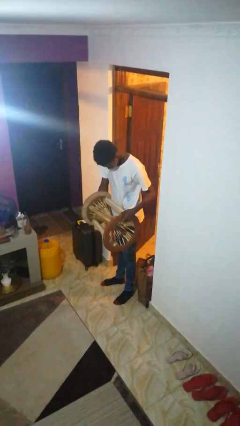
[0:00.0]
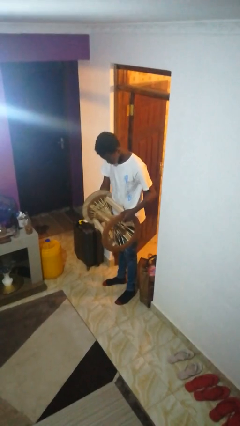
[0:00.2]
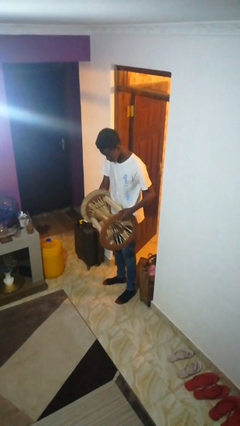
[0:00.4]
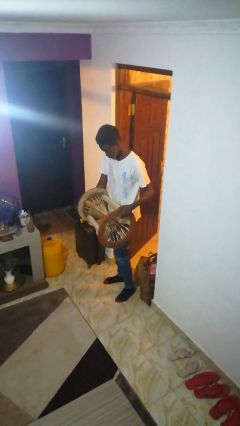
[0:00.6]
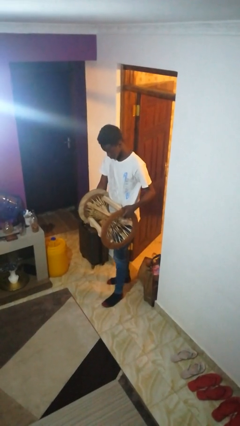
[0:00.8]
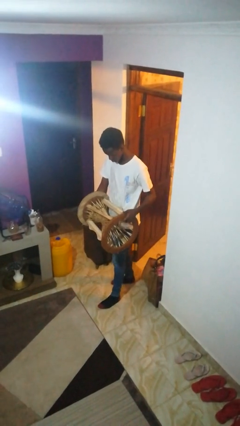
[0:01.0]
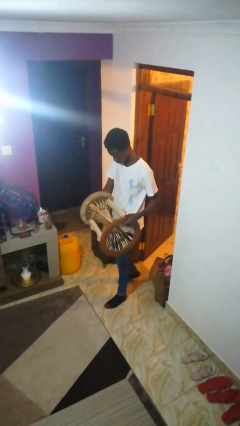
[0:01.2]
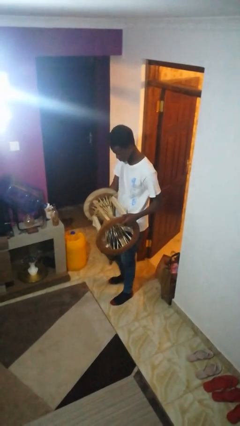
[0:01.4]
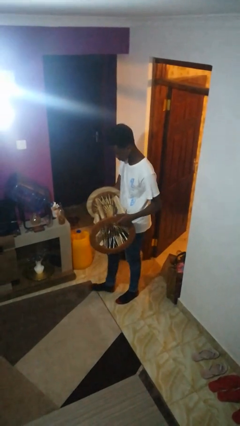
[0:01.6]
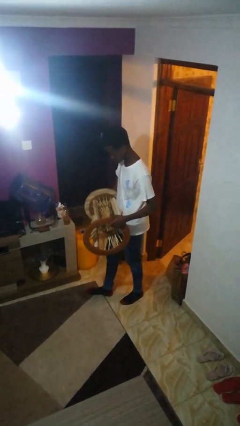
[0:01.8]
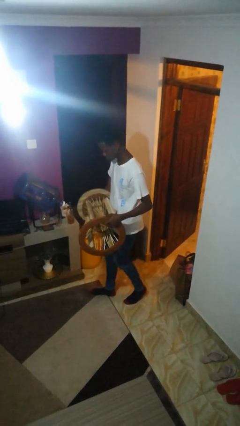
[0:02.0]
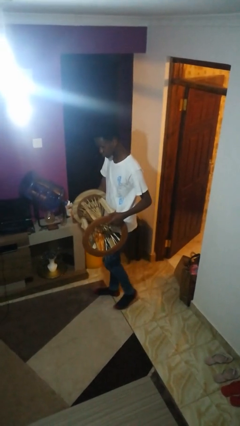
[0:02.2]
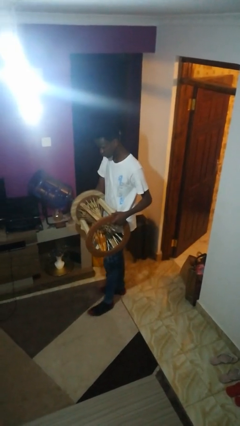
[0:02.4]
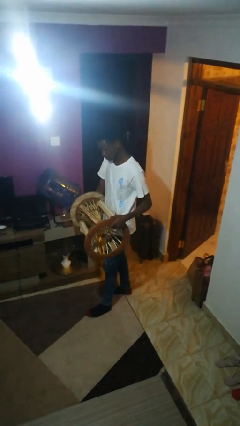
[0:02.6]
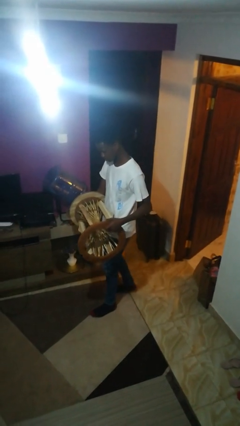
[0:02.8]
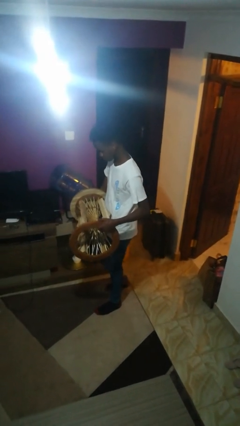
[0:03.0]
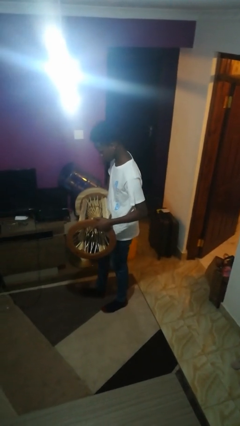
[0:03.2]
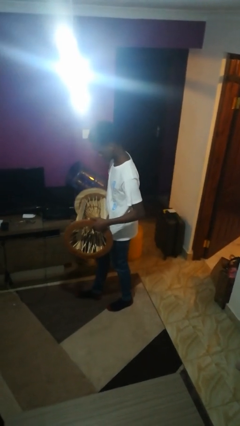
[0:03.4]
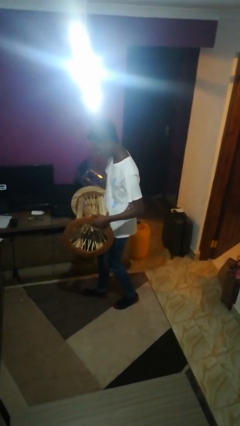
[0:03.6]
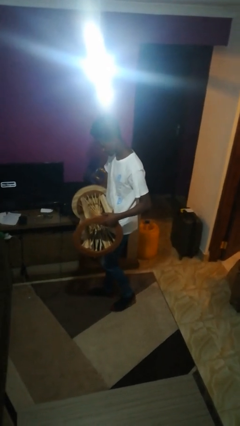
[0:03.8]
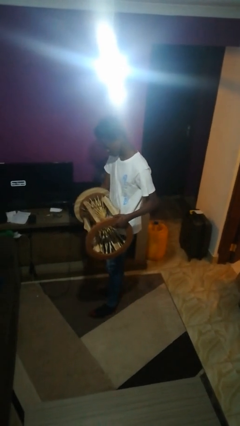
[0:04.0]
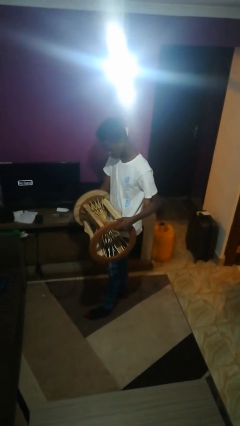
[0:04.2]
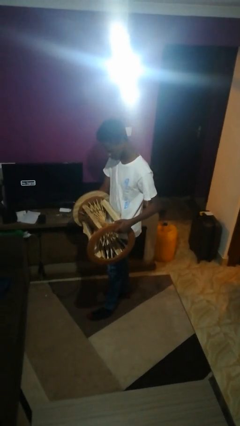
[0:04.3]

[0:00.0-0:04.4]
person carries furniture

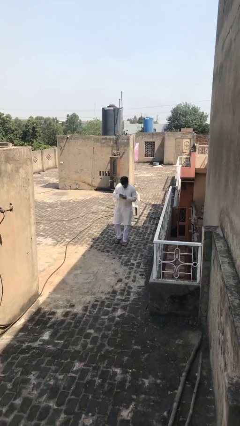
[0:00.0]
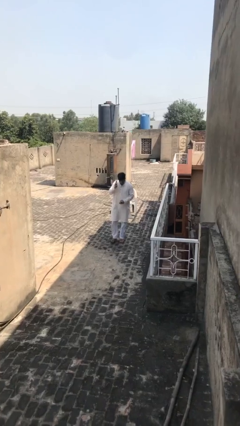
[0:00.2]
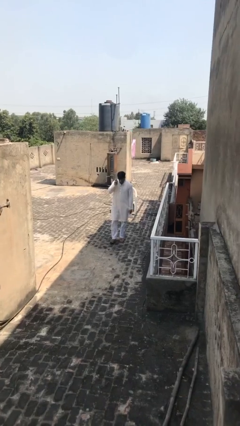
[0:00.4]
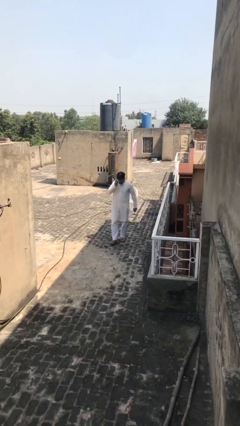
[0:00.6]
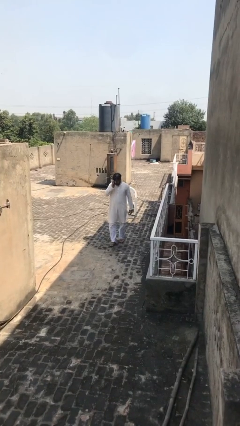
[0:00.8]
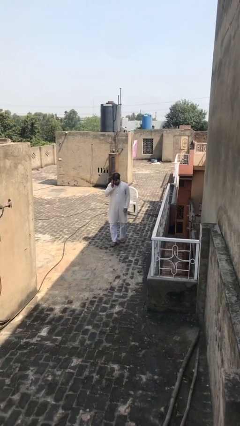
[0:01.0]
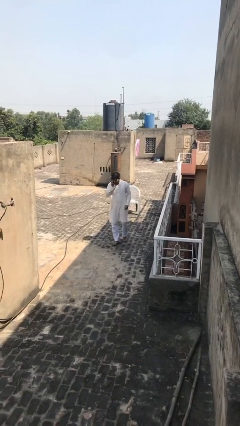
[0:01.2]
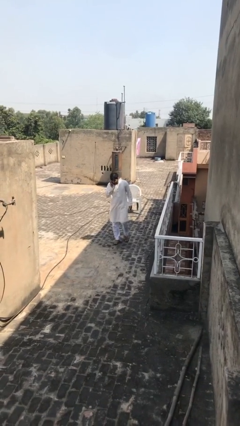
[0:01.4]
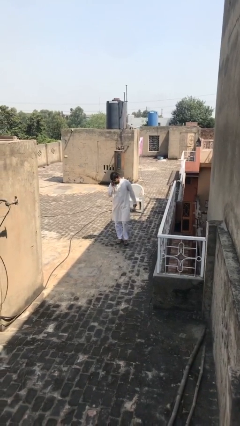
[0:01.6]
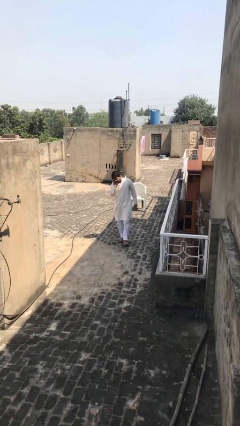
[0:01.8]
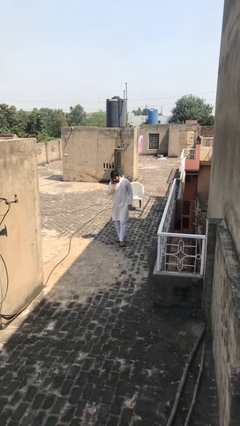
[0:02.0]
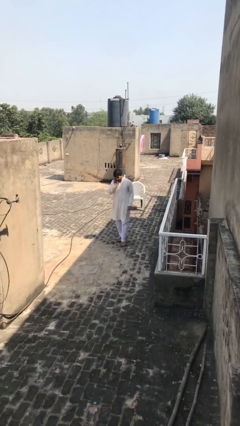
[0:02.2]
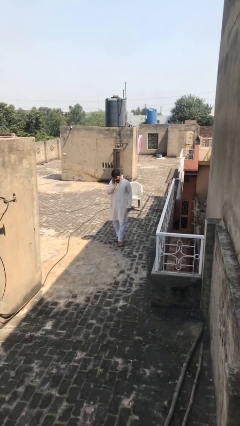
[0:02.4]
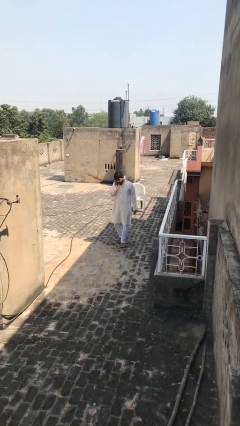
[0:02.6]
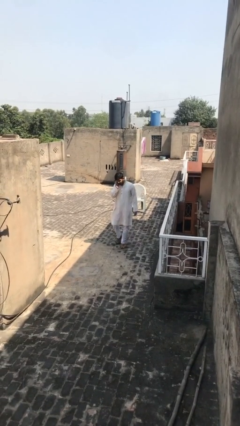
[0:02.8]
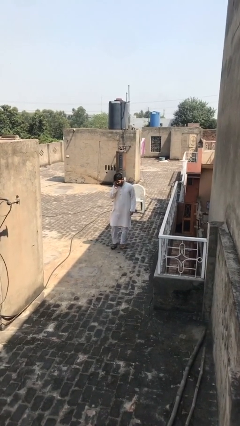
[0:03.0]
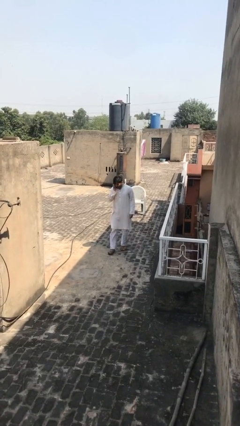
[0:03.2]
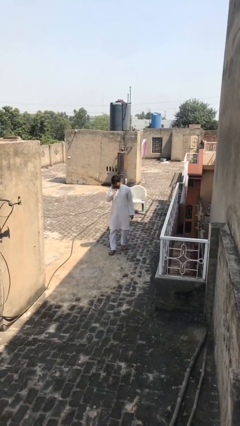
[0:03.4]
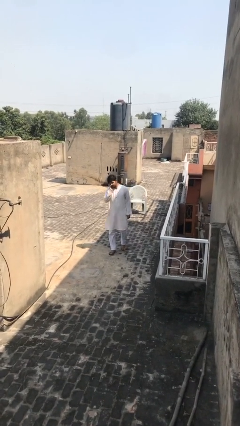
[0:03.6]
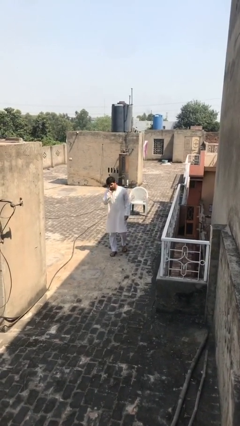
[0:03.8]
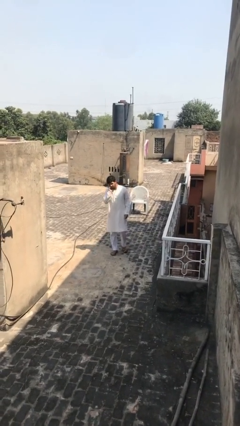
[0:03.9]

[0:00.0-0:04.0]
person talks on phone

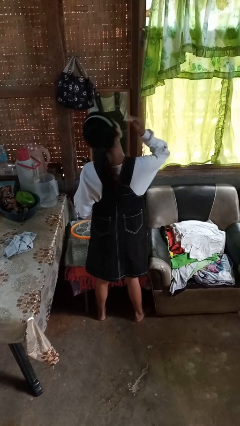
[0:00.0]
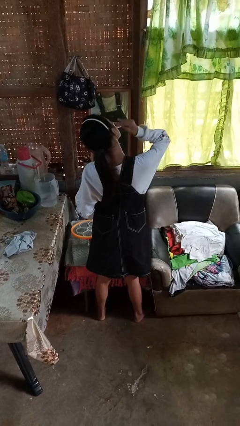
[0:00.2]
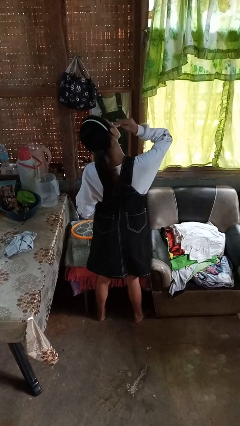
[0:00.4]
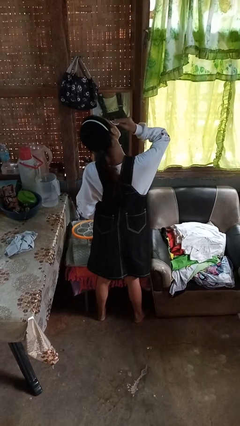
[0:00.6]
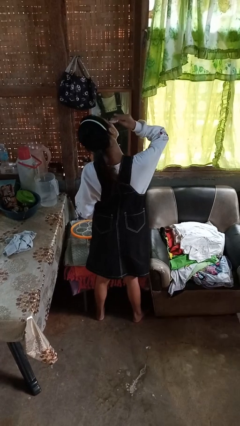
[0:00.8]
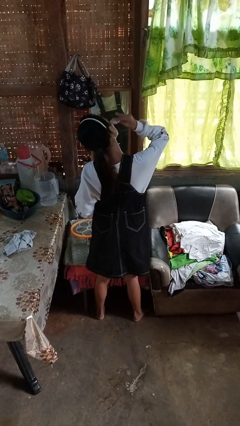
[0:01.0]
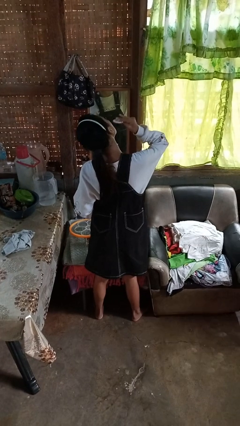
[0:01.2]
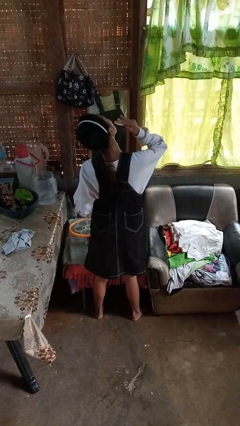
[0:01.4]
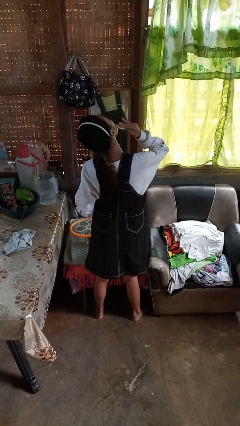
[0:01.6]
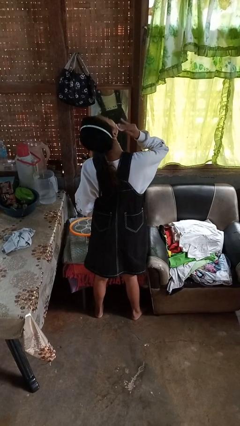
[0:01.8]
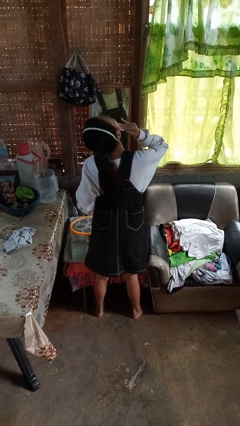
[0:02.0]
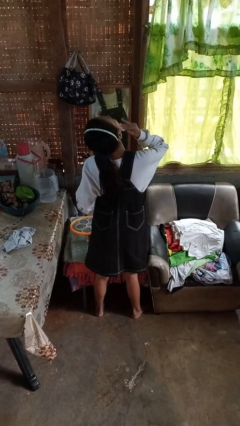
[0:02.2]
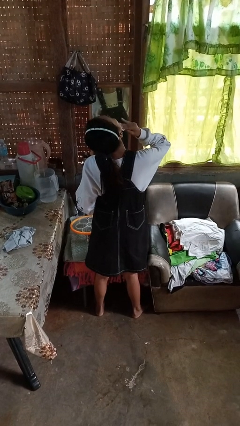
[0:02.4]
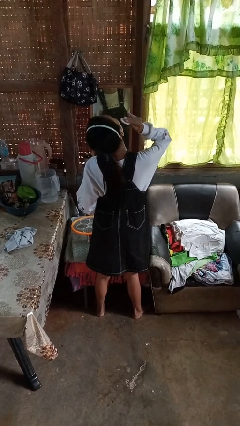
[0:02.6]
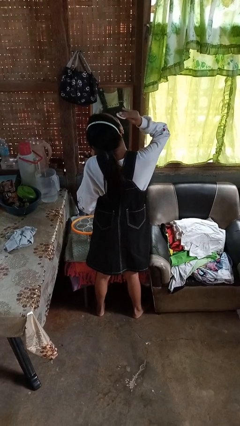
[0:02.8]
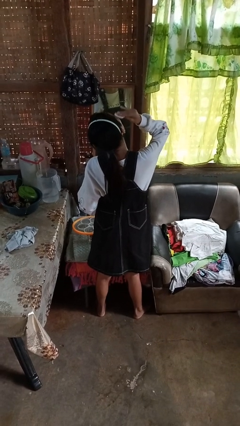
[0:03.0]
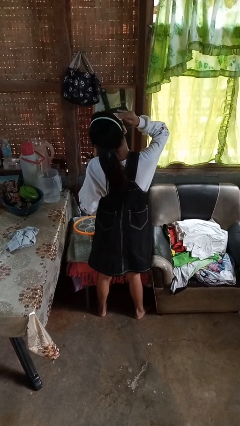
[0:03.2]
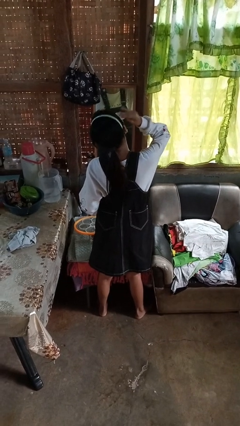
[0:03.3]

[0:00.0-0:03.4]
person applies foundation makeup

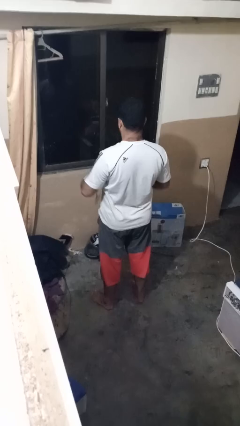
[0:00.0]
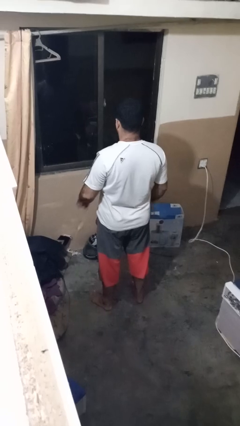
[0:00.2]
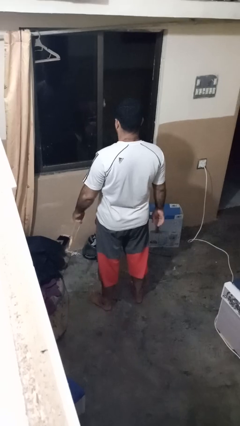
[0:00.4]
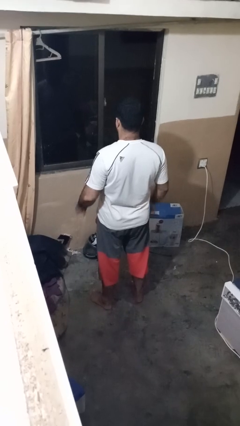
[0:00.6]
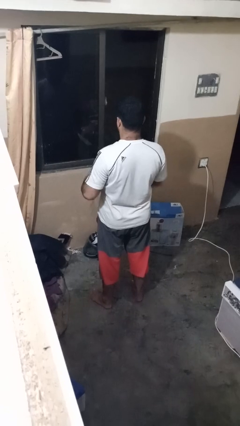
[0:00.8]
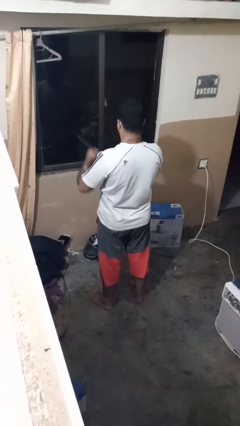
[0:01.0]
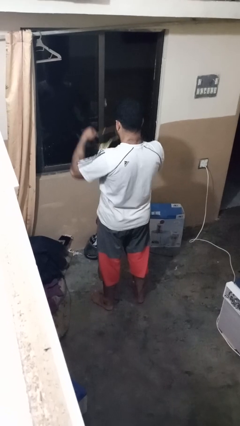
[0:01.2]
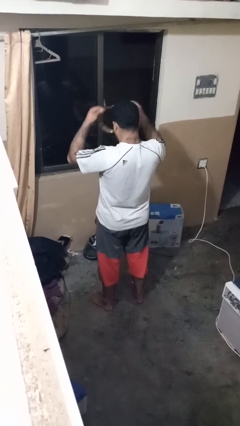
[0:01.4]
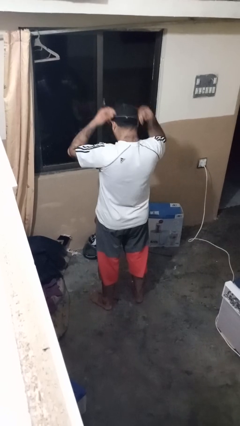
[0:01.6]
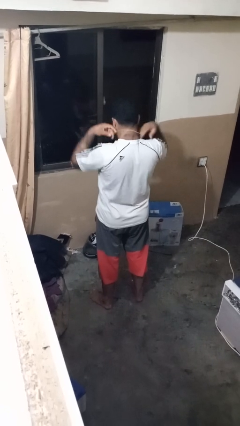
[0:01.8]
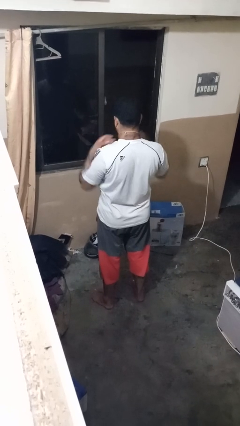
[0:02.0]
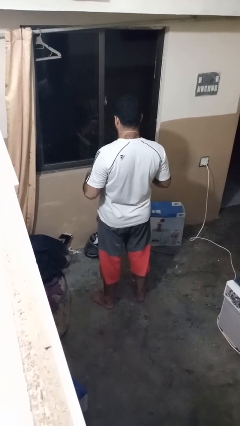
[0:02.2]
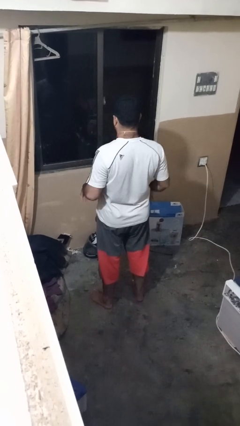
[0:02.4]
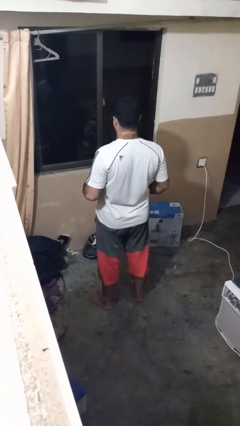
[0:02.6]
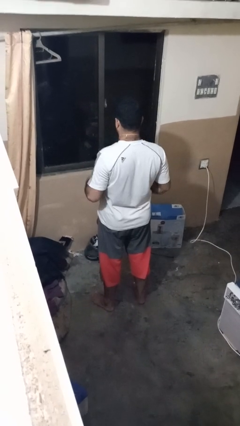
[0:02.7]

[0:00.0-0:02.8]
person puts on necklace

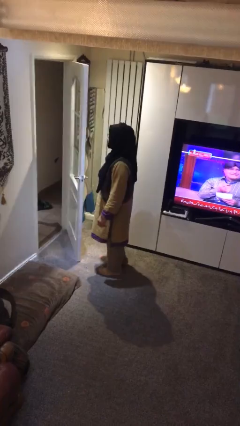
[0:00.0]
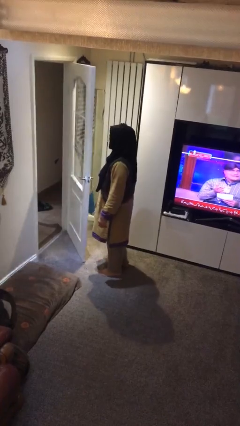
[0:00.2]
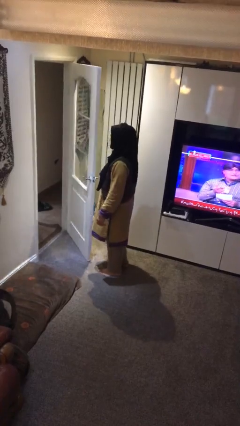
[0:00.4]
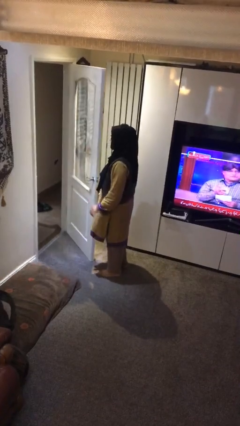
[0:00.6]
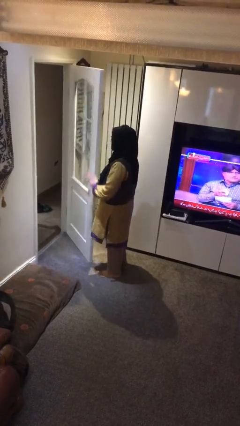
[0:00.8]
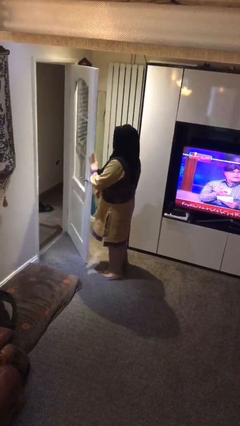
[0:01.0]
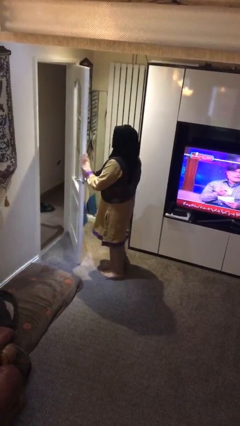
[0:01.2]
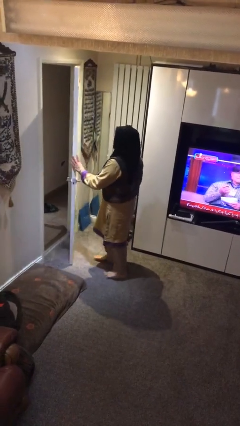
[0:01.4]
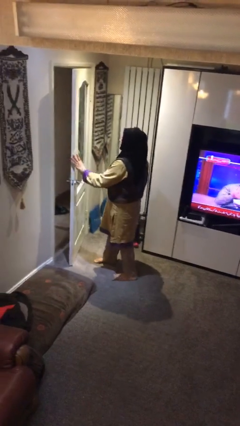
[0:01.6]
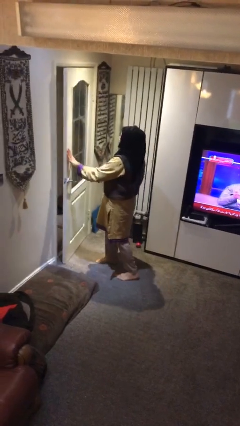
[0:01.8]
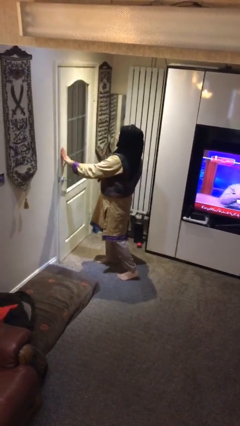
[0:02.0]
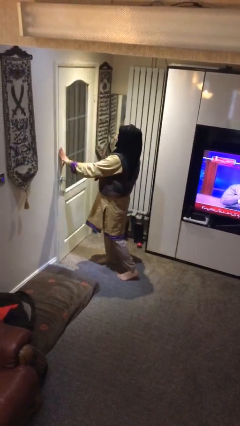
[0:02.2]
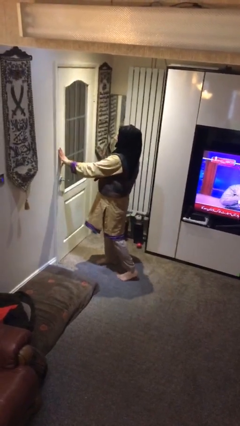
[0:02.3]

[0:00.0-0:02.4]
person closes facility door

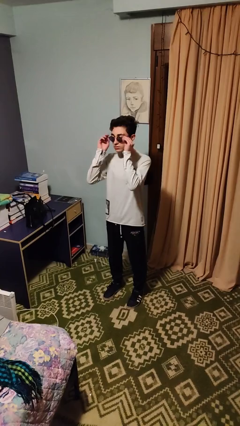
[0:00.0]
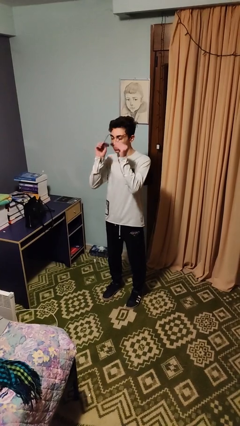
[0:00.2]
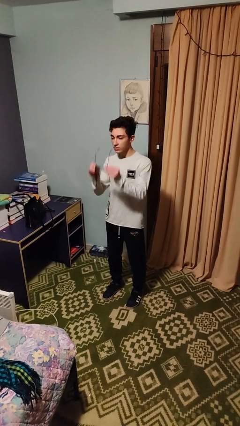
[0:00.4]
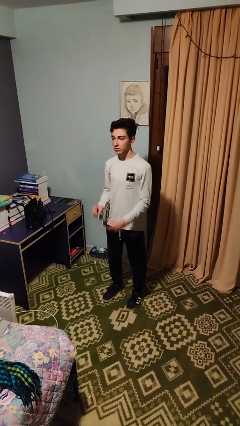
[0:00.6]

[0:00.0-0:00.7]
person takes off sunglasses
